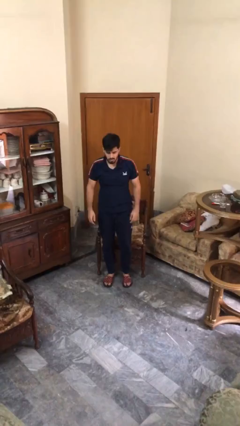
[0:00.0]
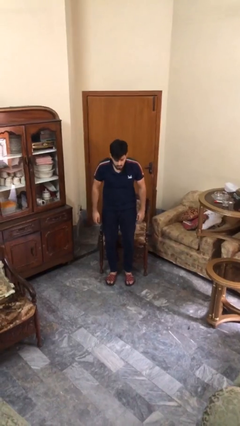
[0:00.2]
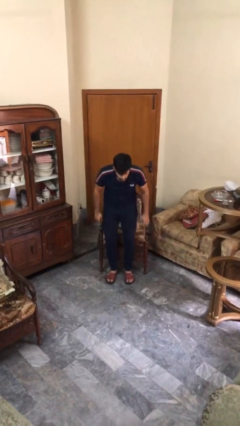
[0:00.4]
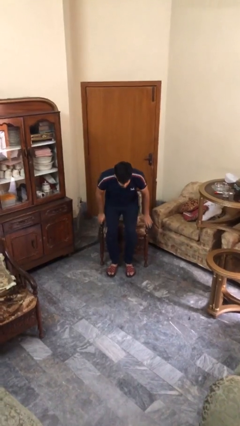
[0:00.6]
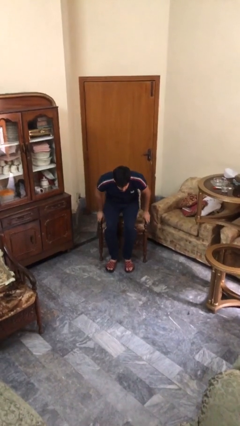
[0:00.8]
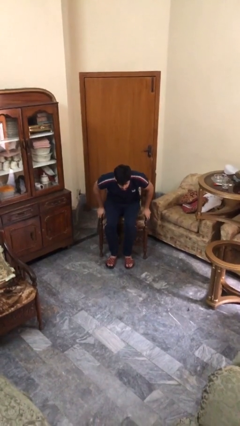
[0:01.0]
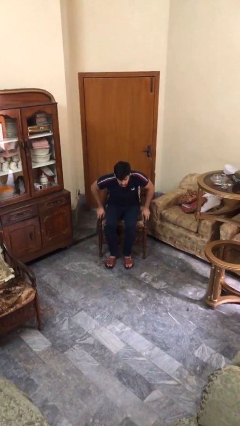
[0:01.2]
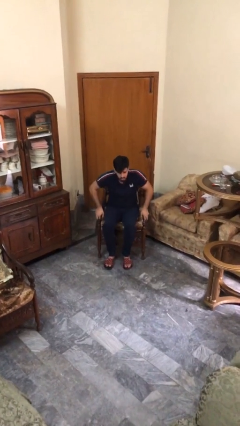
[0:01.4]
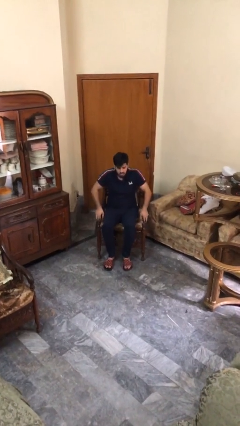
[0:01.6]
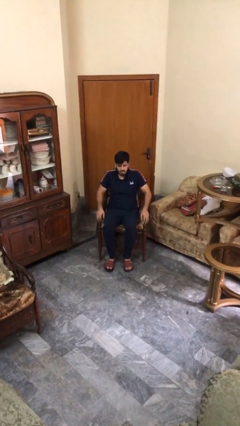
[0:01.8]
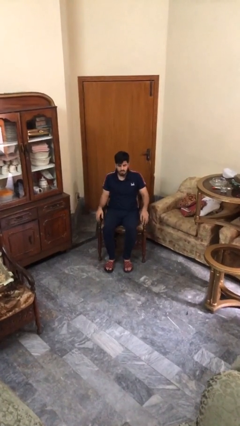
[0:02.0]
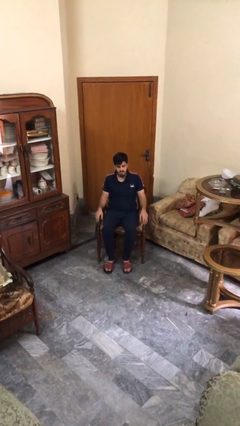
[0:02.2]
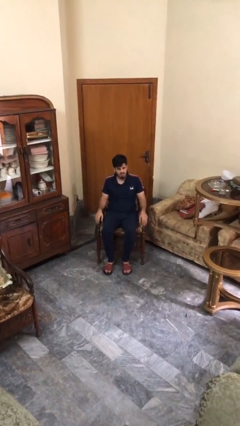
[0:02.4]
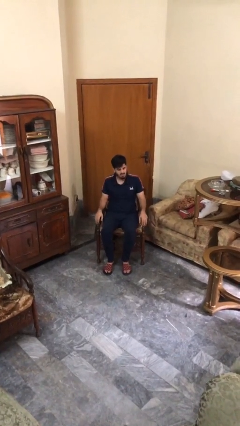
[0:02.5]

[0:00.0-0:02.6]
person sits down

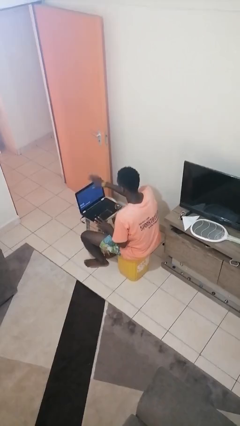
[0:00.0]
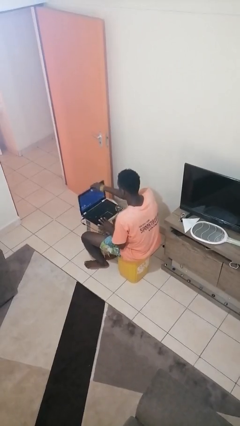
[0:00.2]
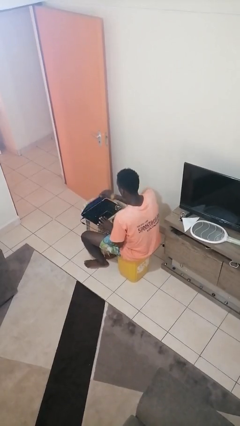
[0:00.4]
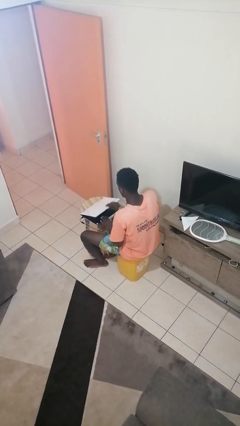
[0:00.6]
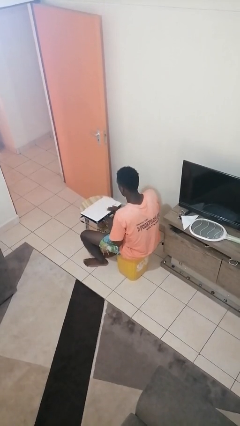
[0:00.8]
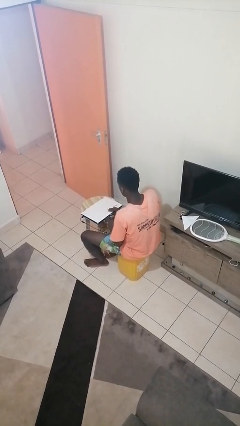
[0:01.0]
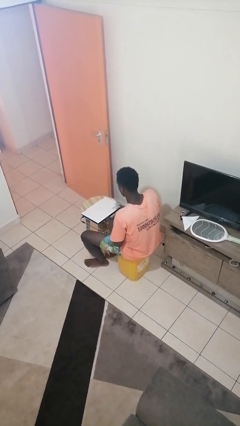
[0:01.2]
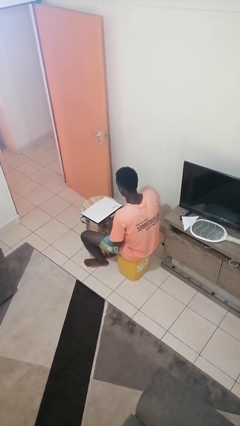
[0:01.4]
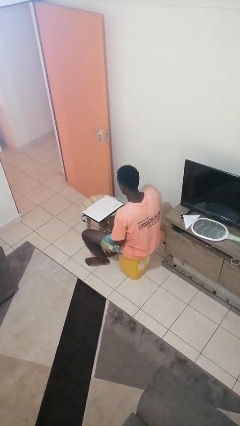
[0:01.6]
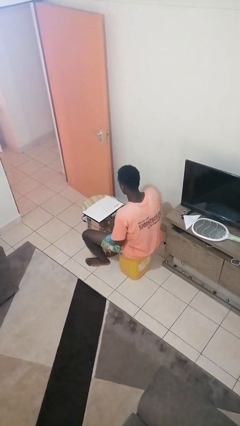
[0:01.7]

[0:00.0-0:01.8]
person closes laptop

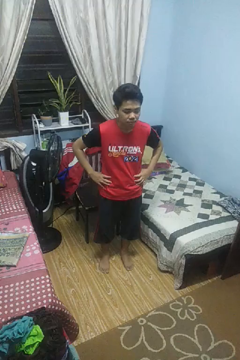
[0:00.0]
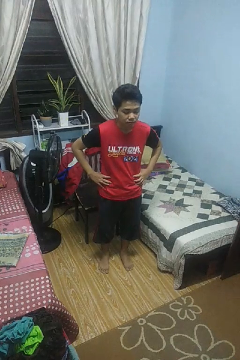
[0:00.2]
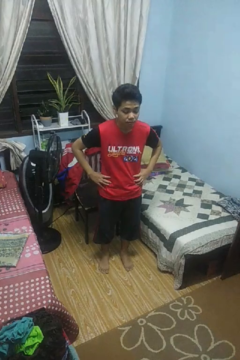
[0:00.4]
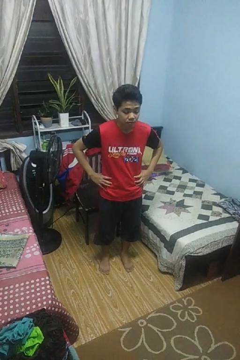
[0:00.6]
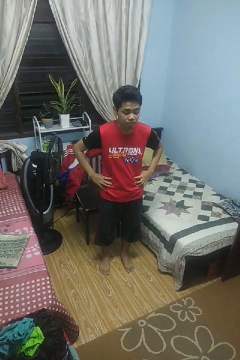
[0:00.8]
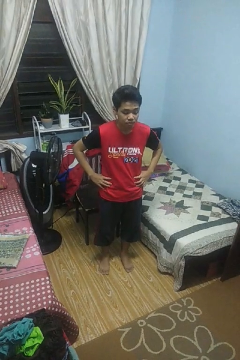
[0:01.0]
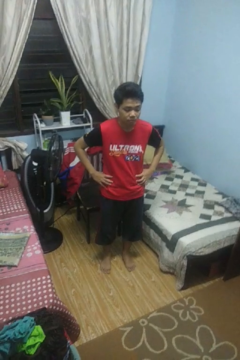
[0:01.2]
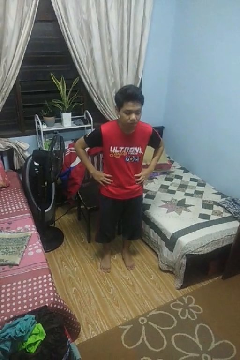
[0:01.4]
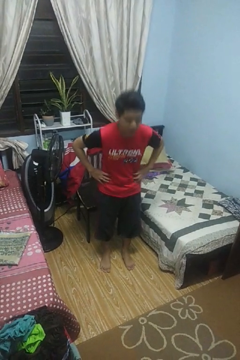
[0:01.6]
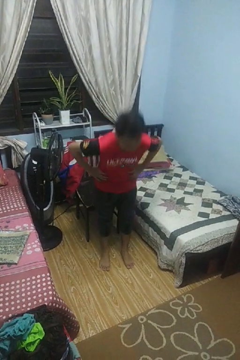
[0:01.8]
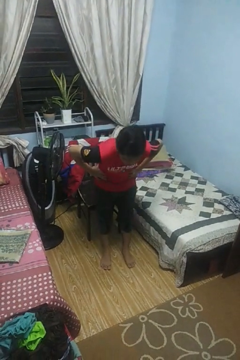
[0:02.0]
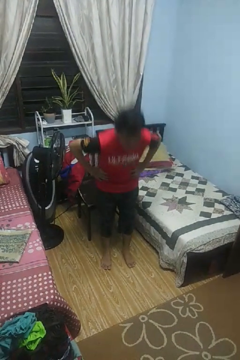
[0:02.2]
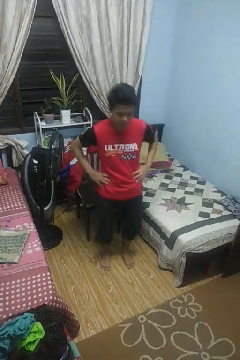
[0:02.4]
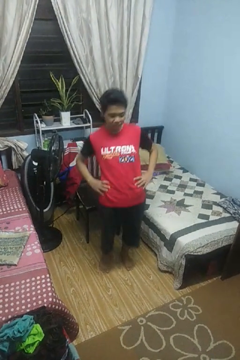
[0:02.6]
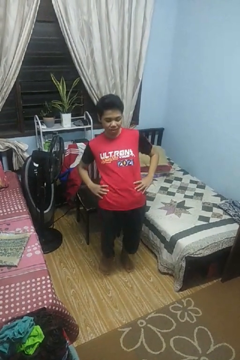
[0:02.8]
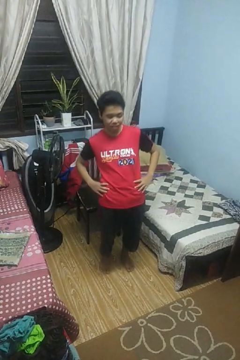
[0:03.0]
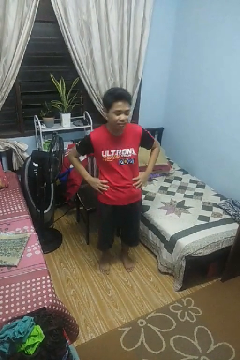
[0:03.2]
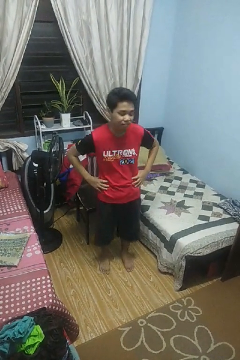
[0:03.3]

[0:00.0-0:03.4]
person wiggles hips

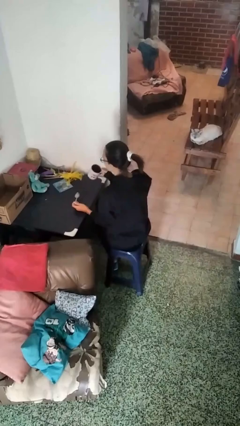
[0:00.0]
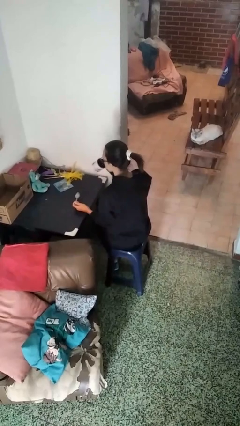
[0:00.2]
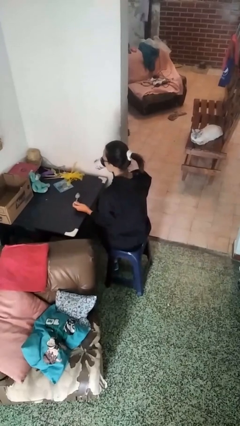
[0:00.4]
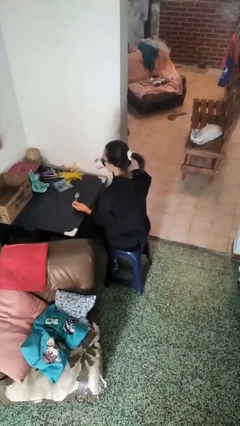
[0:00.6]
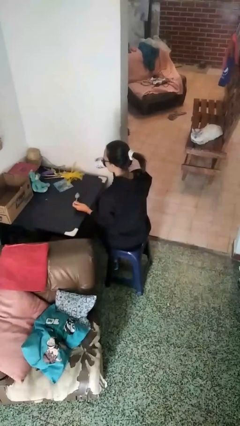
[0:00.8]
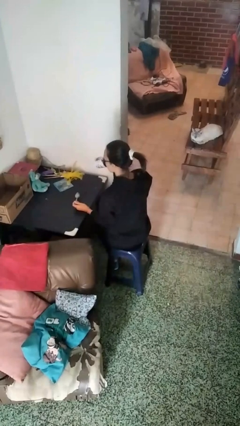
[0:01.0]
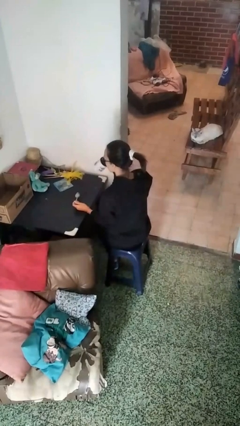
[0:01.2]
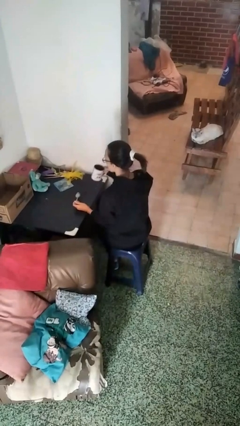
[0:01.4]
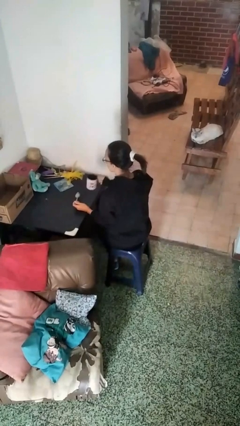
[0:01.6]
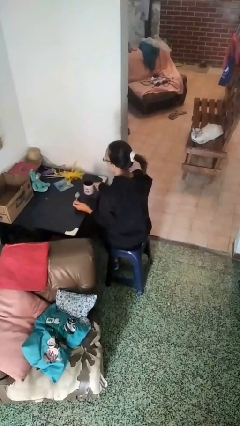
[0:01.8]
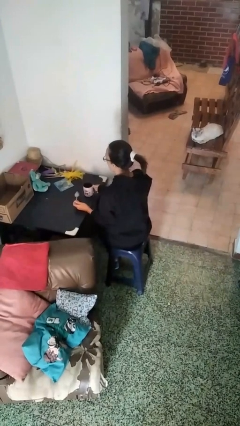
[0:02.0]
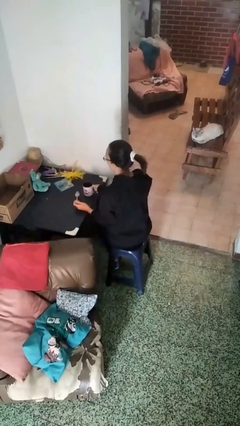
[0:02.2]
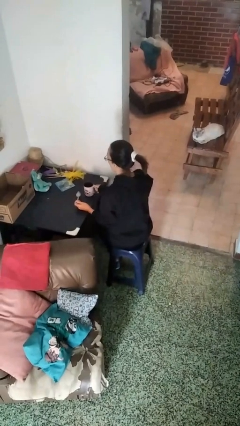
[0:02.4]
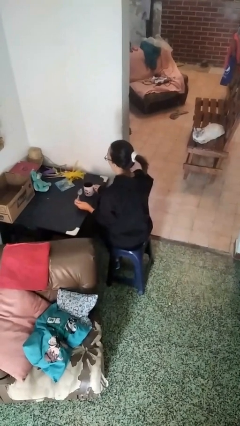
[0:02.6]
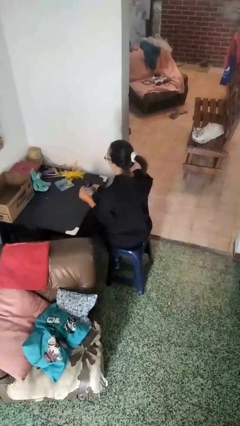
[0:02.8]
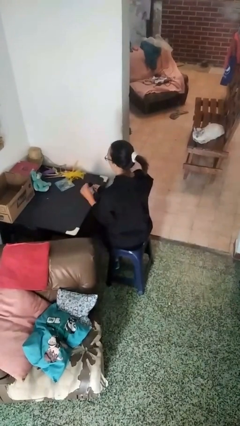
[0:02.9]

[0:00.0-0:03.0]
person drinks from mug

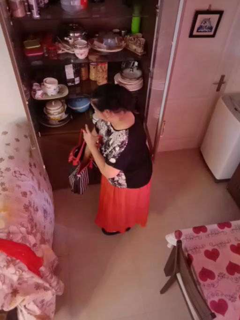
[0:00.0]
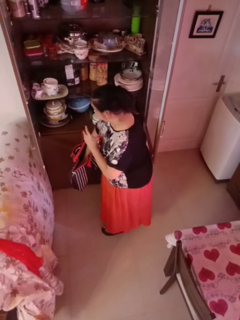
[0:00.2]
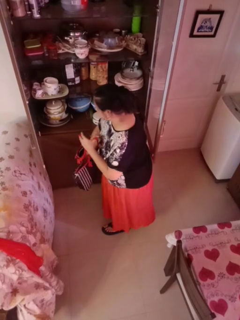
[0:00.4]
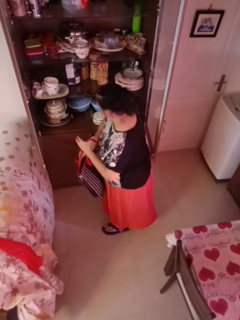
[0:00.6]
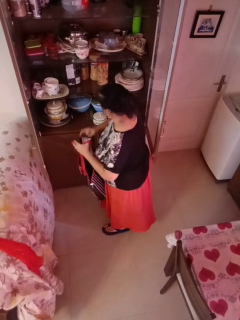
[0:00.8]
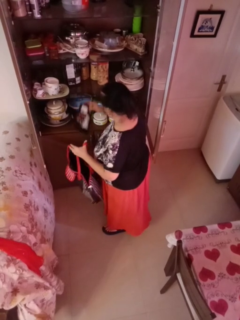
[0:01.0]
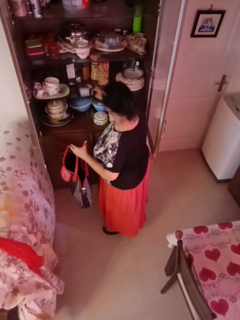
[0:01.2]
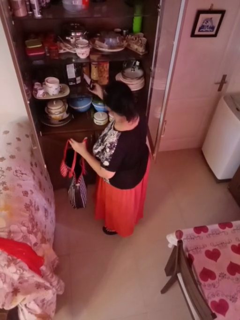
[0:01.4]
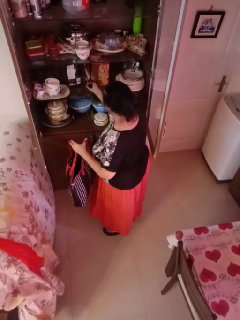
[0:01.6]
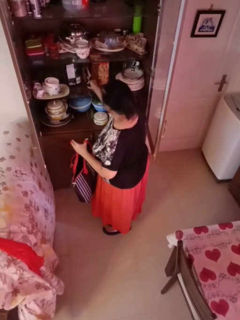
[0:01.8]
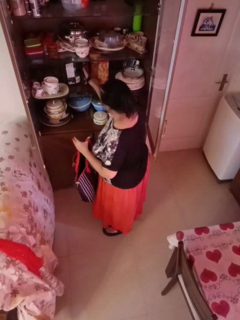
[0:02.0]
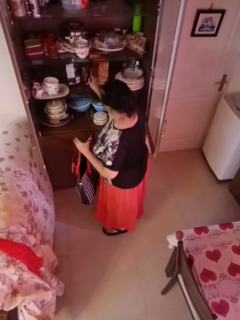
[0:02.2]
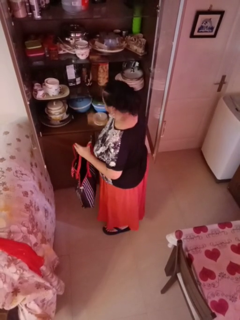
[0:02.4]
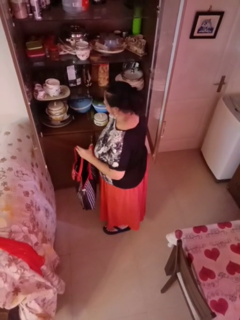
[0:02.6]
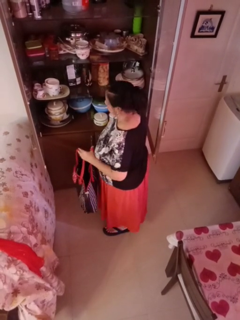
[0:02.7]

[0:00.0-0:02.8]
person loads groceries into cabinet

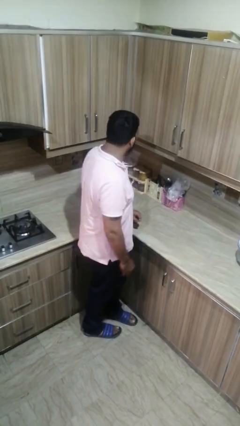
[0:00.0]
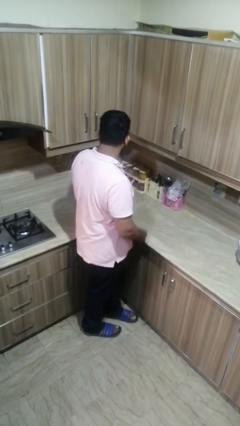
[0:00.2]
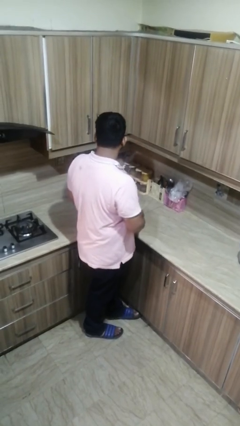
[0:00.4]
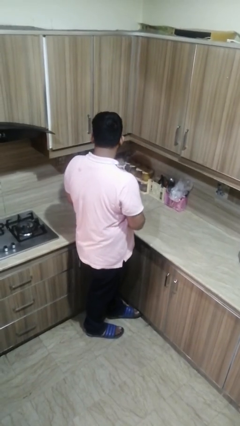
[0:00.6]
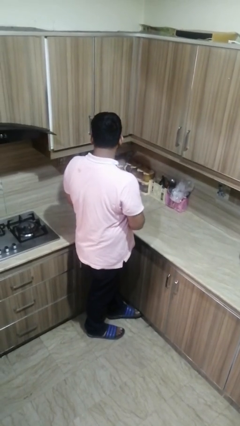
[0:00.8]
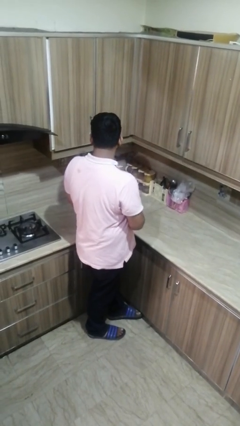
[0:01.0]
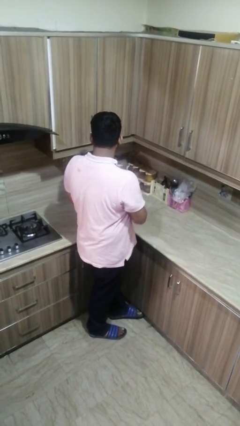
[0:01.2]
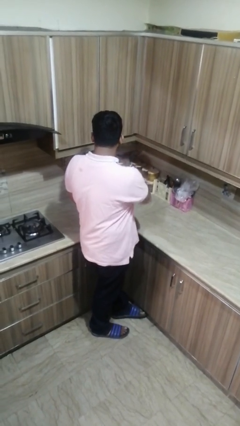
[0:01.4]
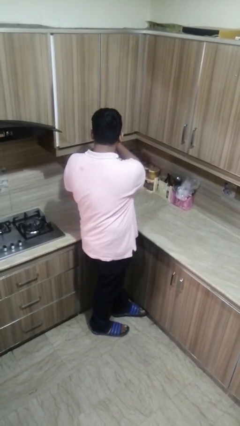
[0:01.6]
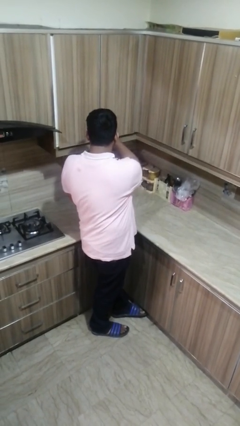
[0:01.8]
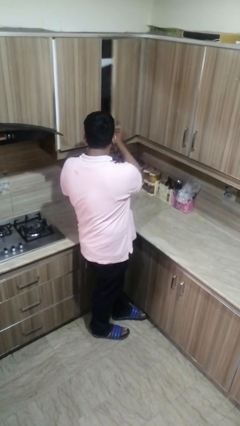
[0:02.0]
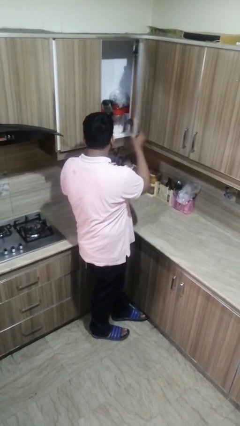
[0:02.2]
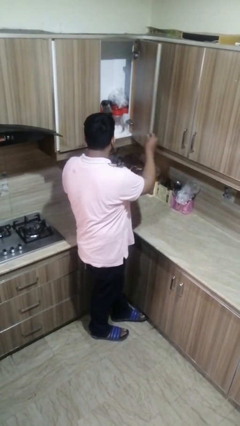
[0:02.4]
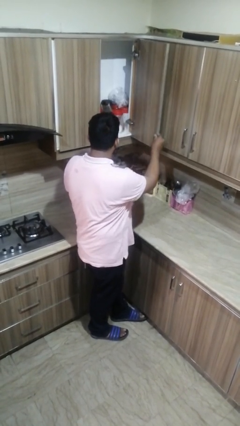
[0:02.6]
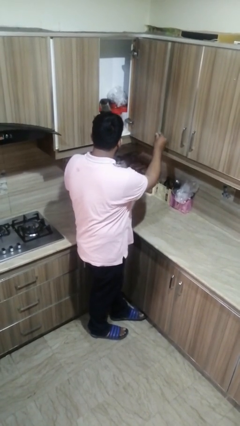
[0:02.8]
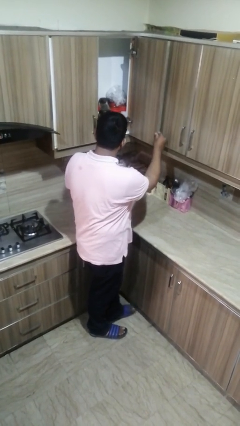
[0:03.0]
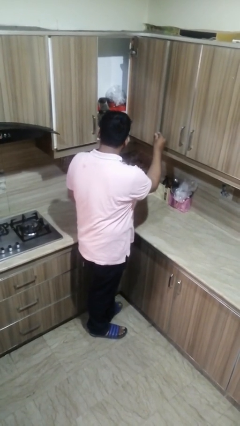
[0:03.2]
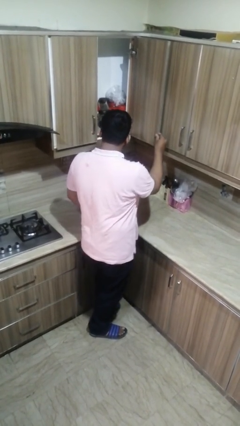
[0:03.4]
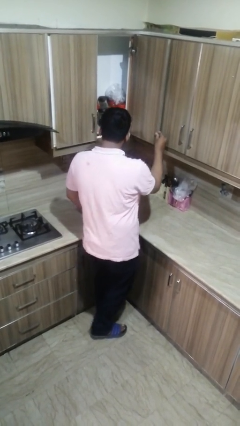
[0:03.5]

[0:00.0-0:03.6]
person opens cabinet

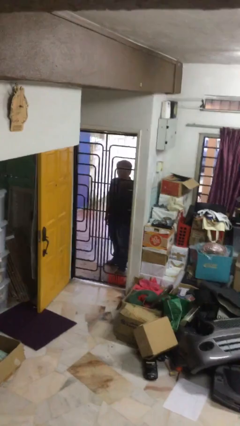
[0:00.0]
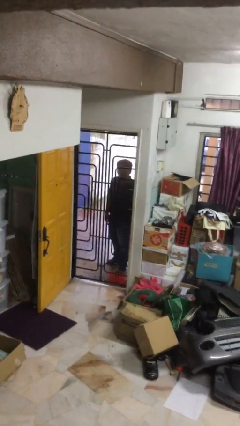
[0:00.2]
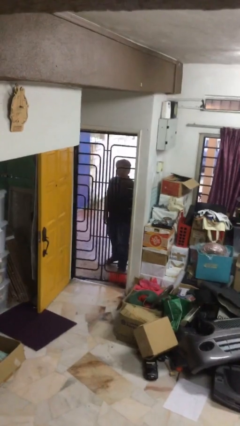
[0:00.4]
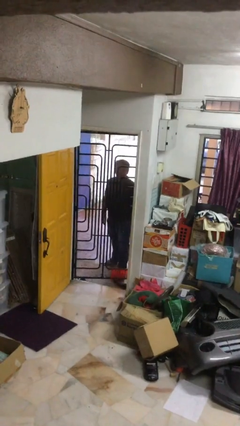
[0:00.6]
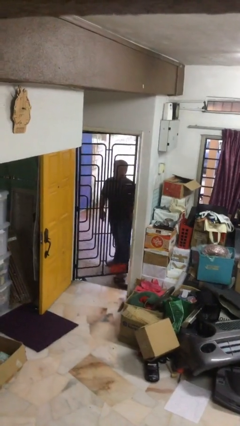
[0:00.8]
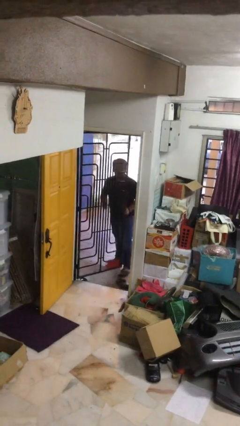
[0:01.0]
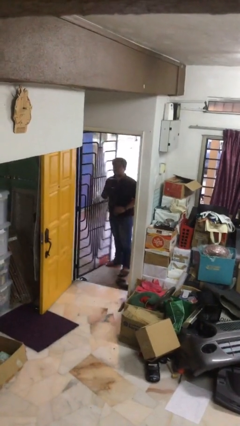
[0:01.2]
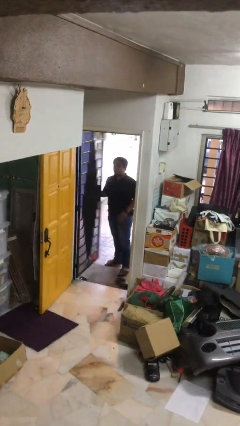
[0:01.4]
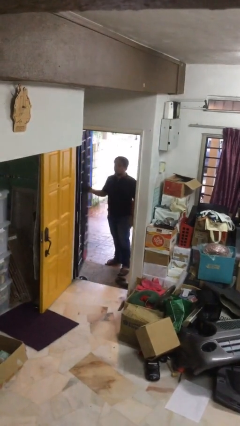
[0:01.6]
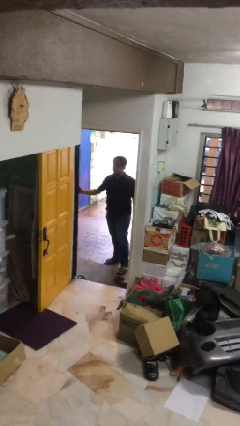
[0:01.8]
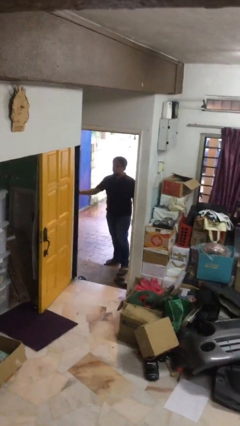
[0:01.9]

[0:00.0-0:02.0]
person opens facility door
